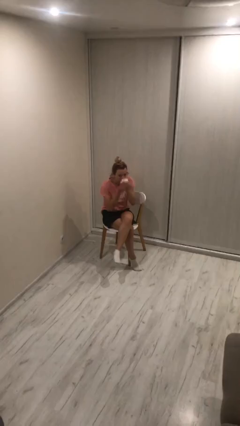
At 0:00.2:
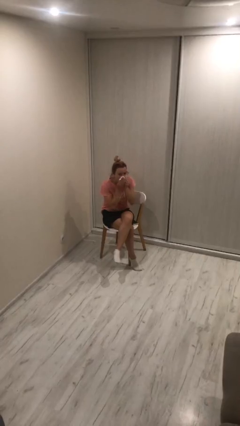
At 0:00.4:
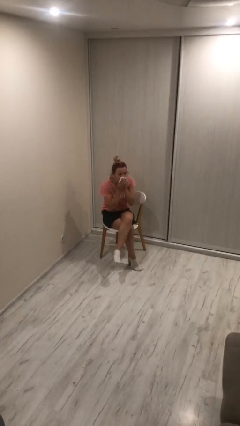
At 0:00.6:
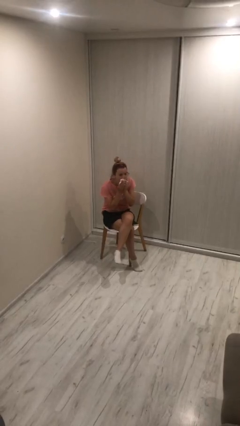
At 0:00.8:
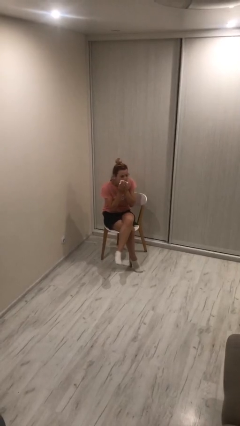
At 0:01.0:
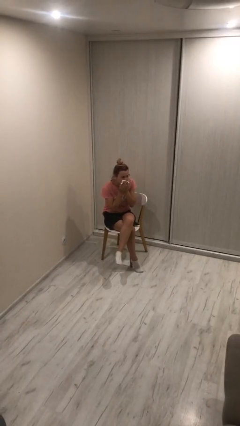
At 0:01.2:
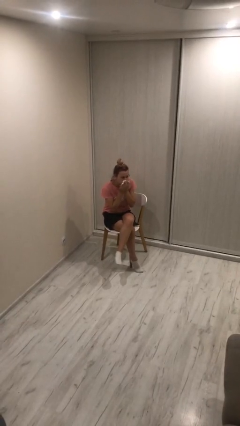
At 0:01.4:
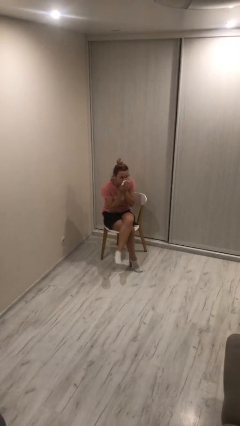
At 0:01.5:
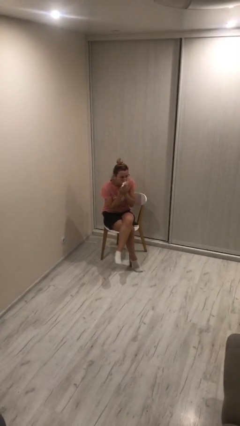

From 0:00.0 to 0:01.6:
person wipes mouth with napkin

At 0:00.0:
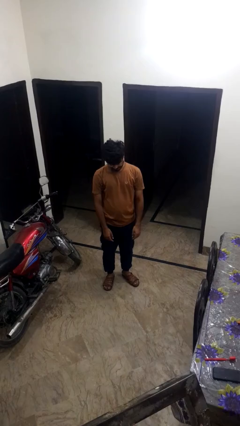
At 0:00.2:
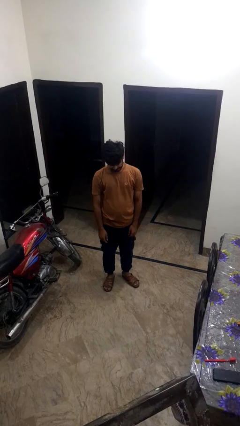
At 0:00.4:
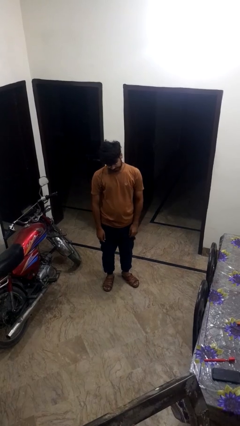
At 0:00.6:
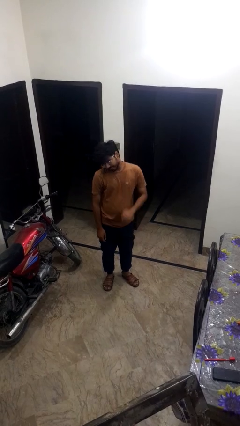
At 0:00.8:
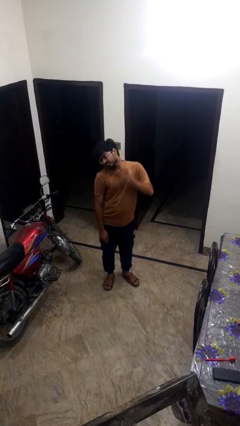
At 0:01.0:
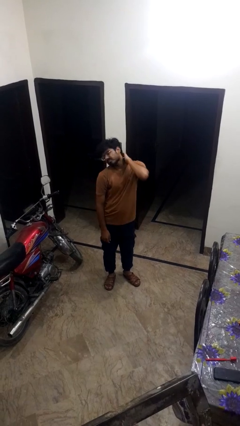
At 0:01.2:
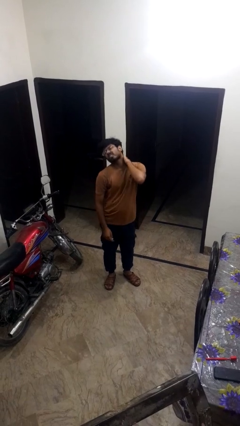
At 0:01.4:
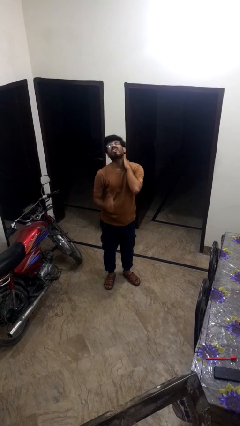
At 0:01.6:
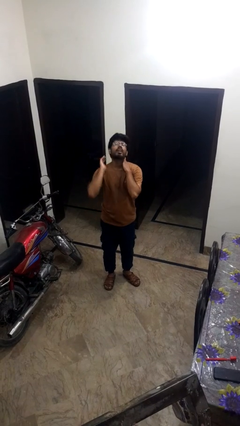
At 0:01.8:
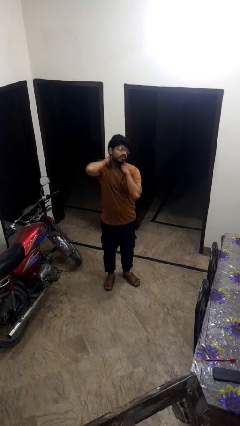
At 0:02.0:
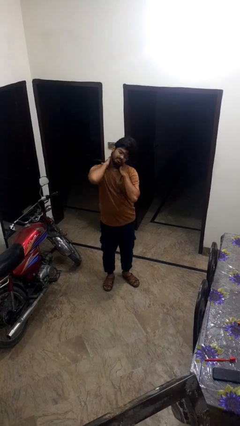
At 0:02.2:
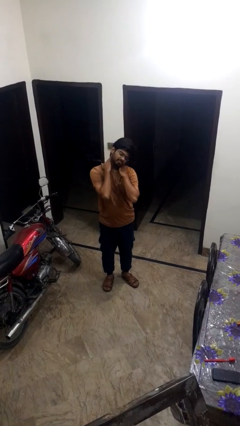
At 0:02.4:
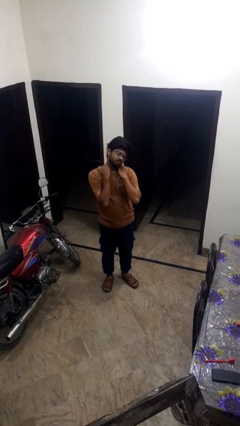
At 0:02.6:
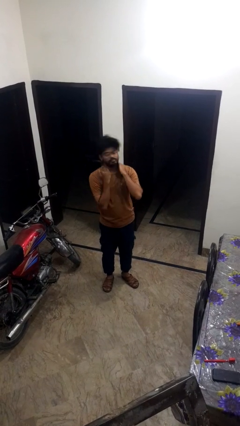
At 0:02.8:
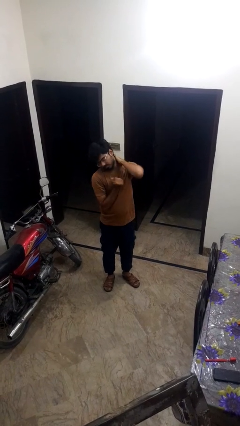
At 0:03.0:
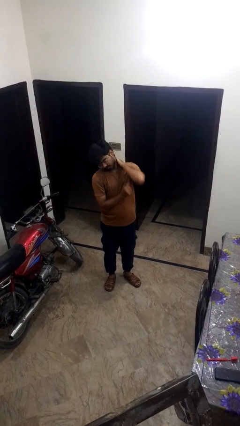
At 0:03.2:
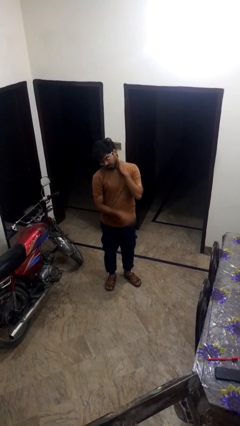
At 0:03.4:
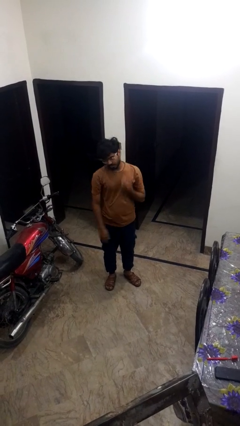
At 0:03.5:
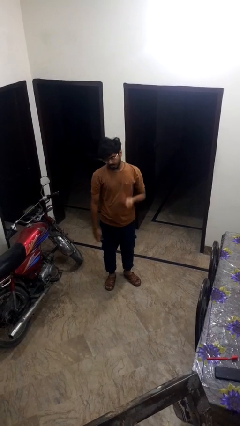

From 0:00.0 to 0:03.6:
person rubs neck

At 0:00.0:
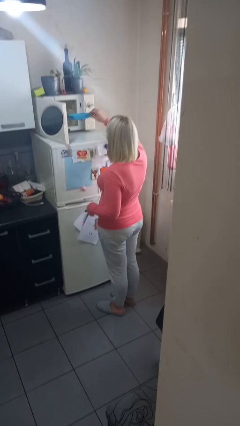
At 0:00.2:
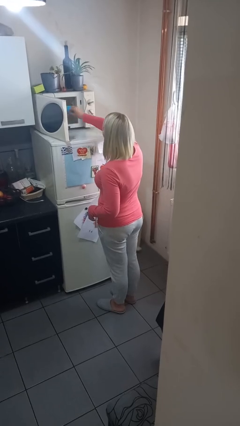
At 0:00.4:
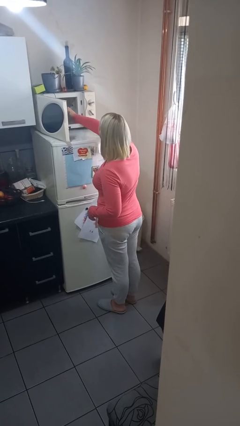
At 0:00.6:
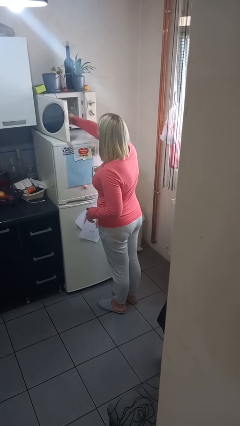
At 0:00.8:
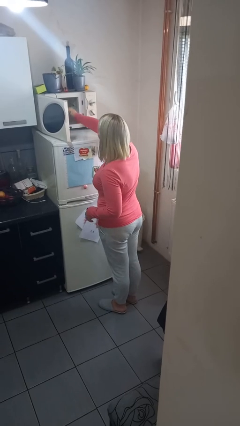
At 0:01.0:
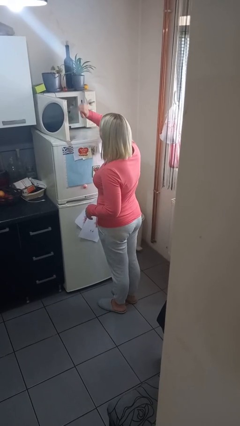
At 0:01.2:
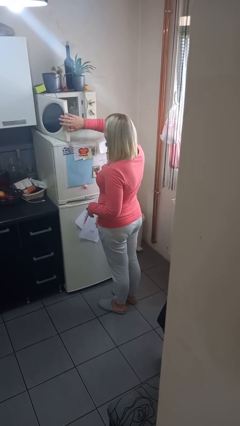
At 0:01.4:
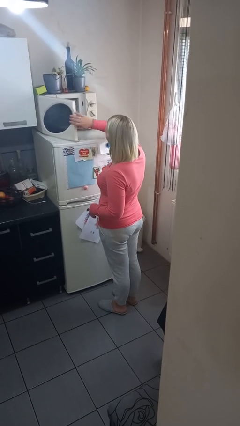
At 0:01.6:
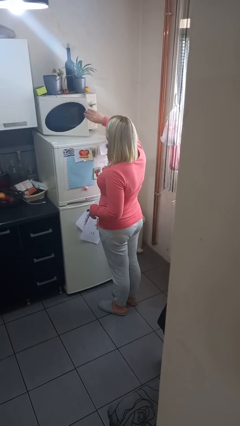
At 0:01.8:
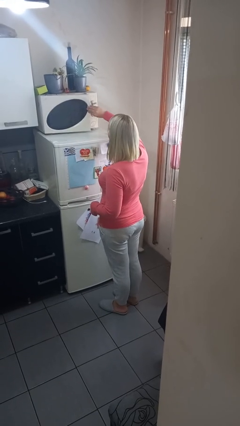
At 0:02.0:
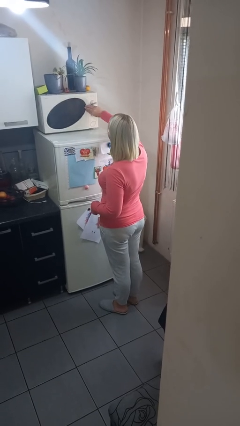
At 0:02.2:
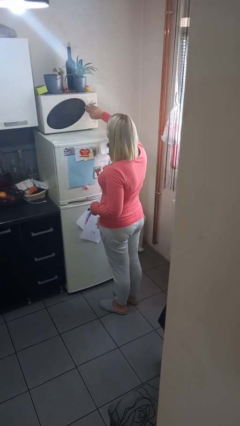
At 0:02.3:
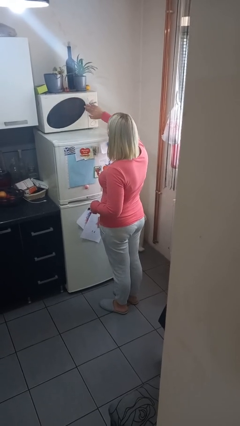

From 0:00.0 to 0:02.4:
person puts object into microwave

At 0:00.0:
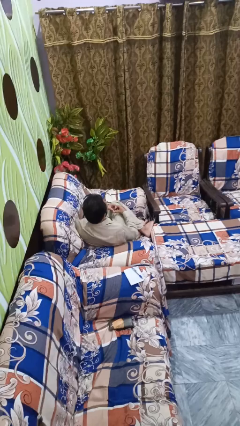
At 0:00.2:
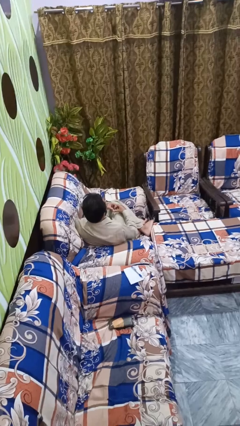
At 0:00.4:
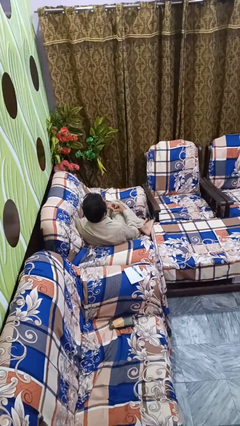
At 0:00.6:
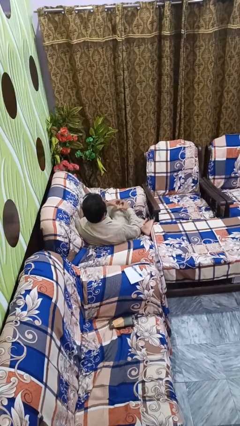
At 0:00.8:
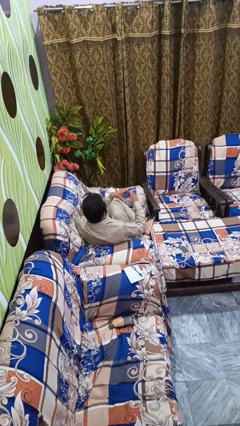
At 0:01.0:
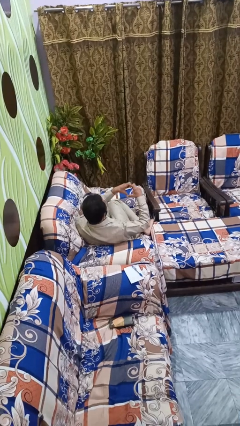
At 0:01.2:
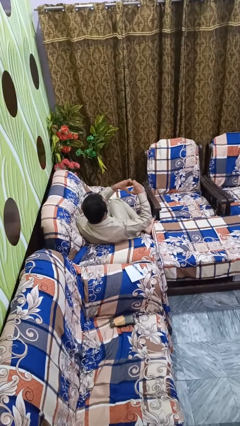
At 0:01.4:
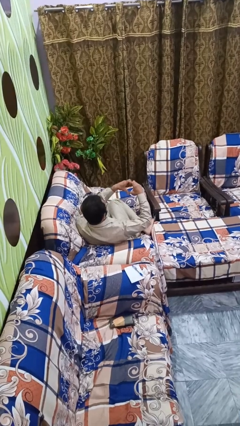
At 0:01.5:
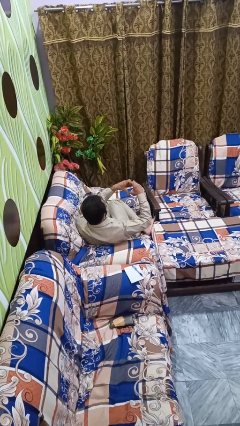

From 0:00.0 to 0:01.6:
person gestures heart

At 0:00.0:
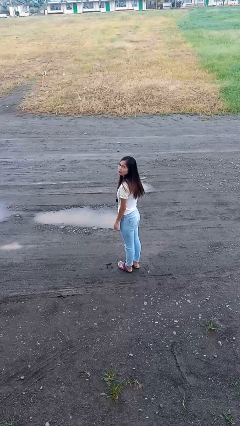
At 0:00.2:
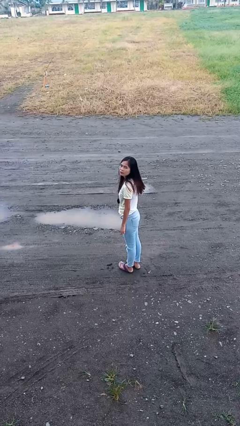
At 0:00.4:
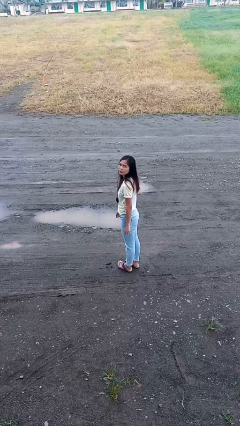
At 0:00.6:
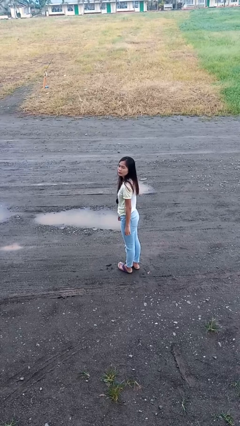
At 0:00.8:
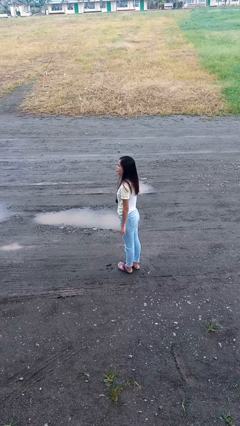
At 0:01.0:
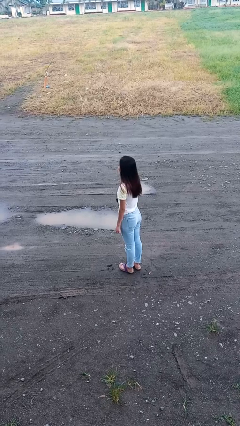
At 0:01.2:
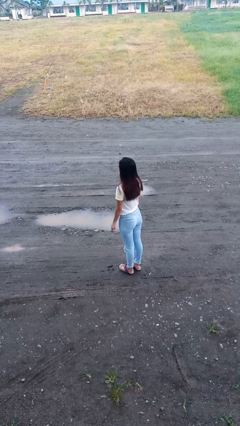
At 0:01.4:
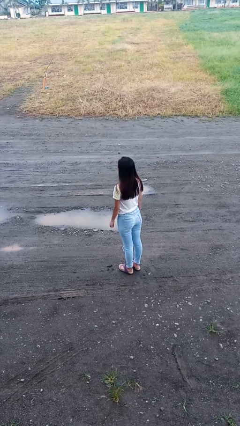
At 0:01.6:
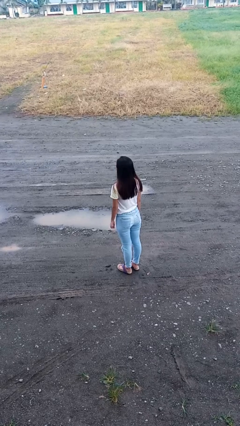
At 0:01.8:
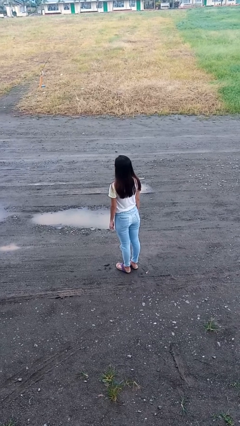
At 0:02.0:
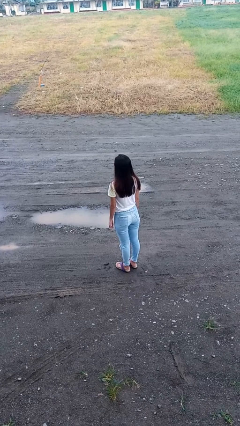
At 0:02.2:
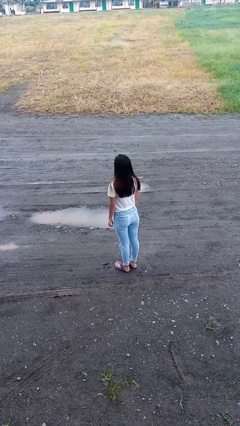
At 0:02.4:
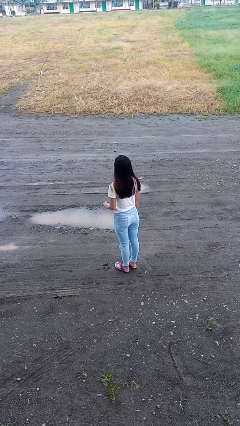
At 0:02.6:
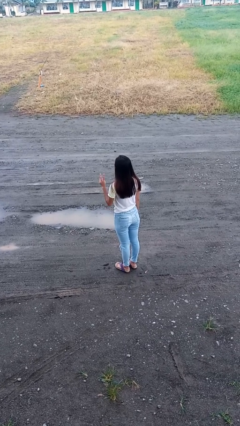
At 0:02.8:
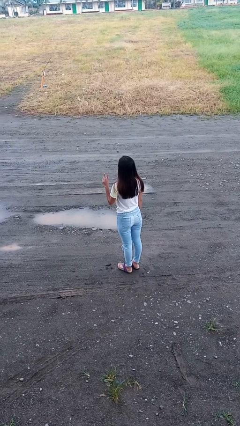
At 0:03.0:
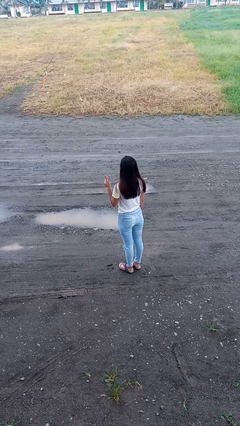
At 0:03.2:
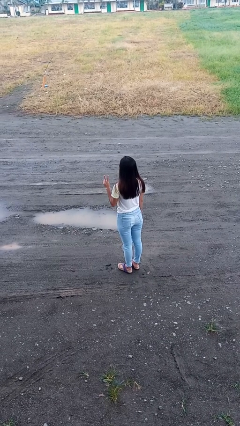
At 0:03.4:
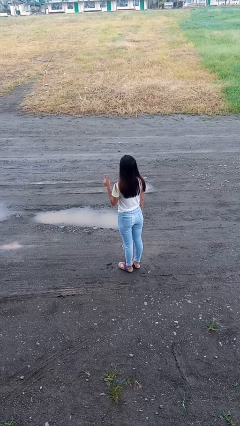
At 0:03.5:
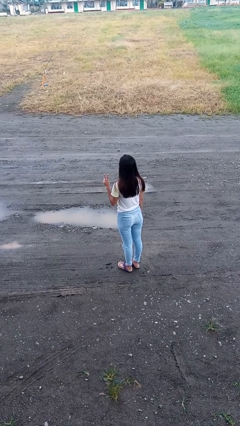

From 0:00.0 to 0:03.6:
person gestures peace

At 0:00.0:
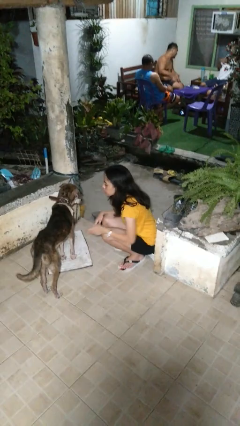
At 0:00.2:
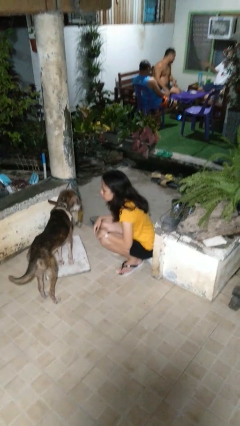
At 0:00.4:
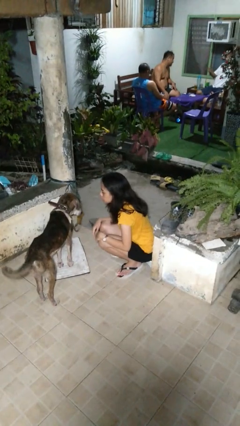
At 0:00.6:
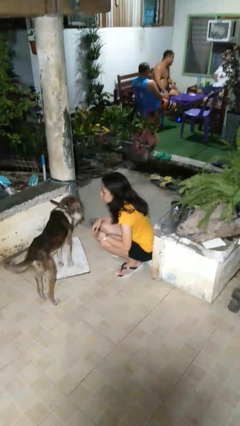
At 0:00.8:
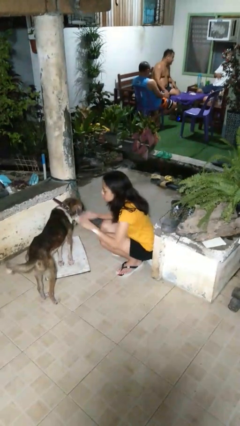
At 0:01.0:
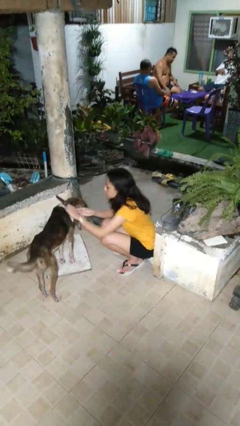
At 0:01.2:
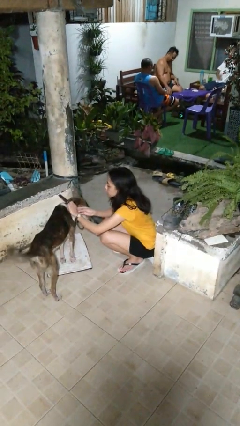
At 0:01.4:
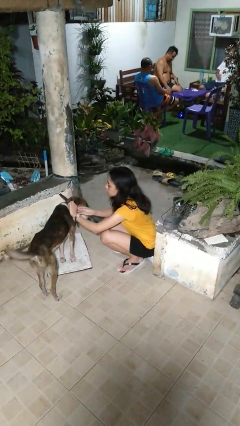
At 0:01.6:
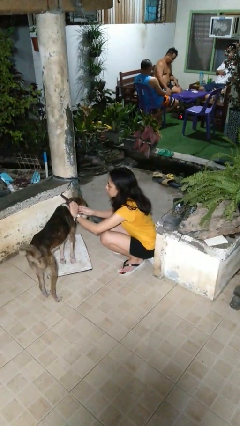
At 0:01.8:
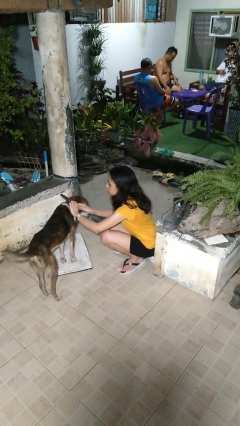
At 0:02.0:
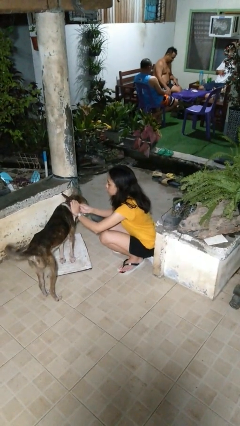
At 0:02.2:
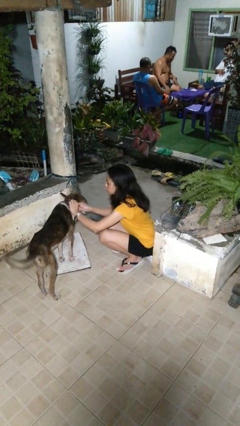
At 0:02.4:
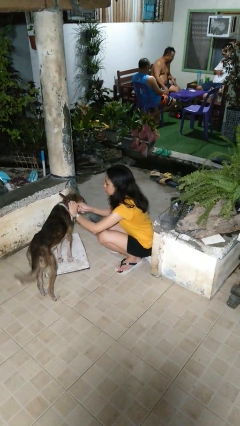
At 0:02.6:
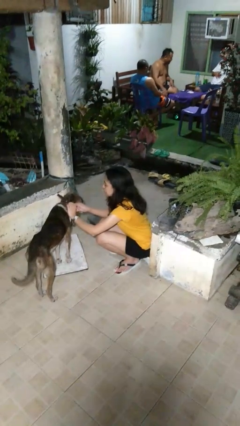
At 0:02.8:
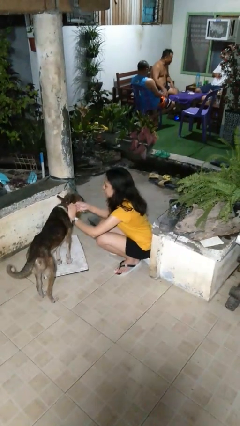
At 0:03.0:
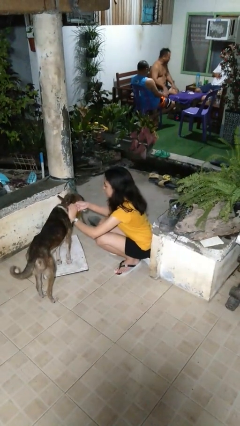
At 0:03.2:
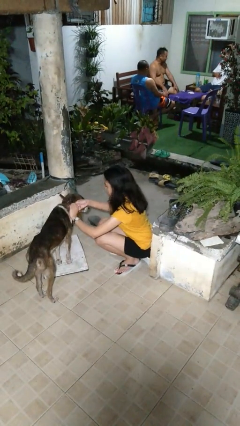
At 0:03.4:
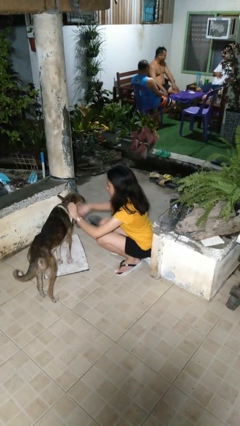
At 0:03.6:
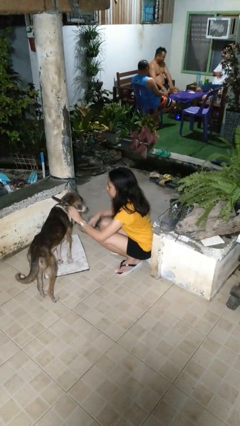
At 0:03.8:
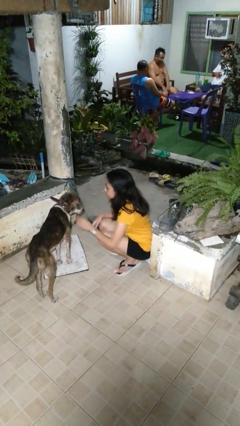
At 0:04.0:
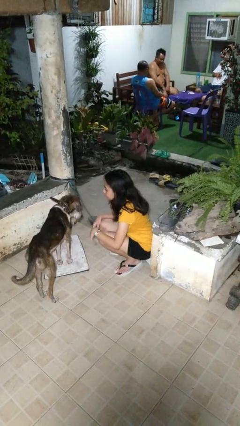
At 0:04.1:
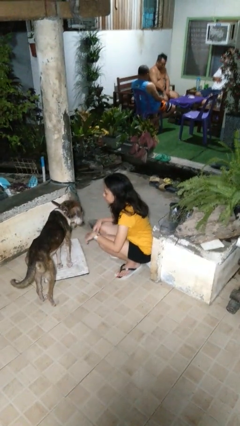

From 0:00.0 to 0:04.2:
person unattaches leash from dog

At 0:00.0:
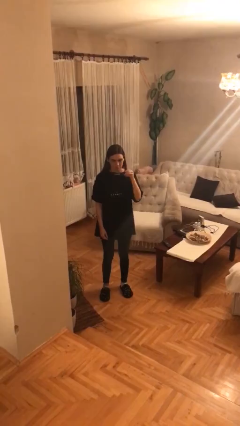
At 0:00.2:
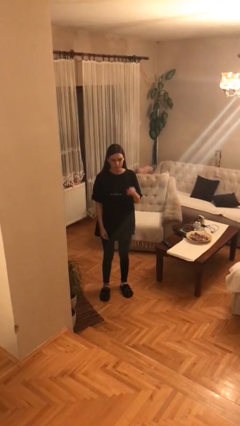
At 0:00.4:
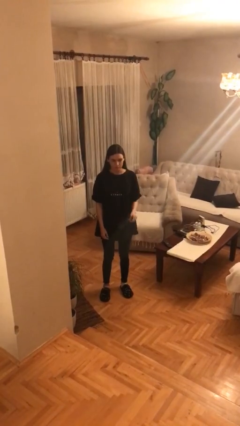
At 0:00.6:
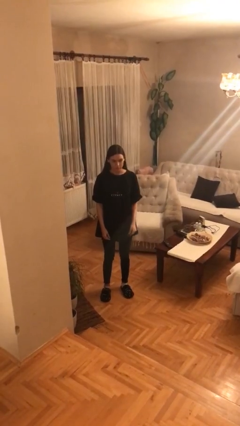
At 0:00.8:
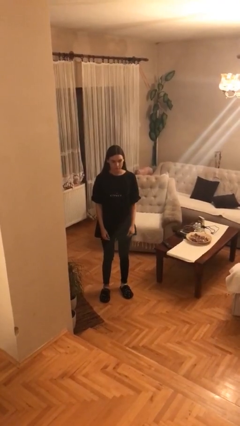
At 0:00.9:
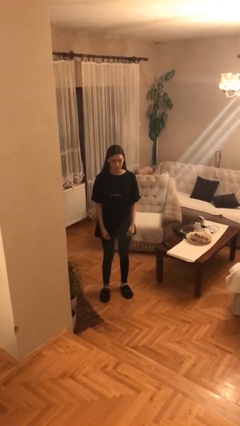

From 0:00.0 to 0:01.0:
person takes off sunglasses
